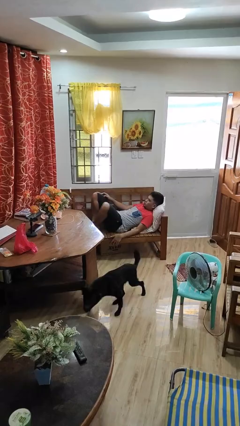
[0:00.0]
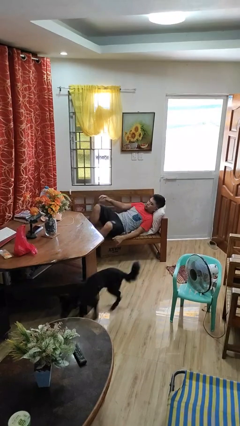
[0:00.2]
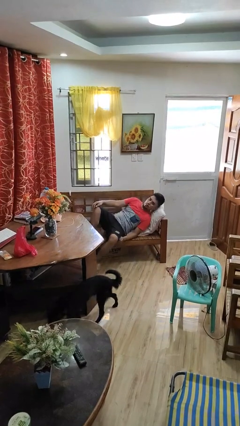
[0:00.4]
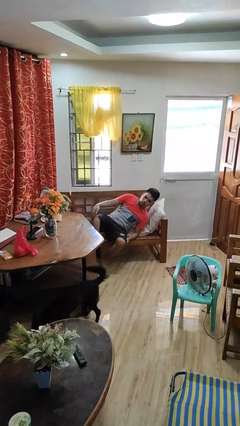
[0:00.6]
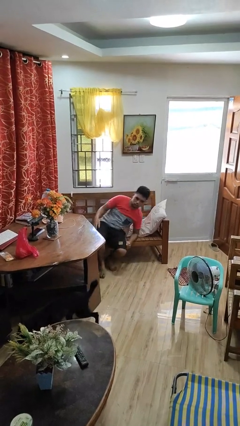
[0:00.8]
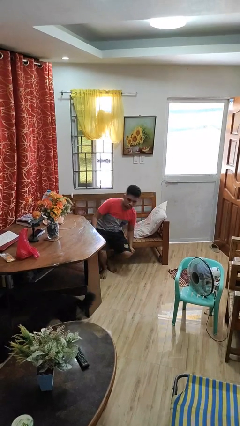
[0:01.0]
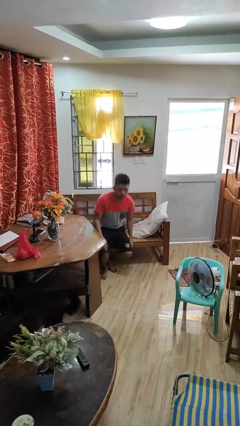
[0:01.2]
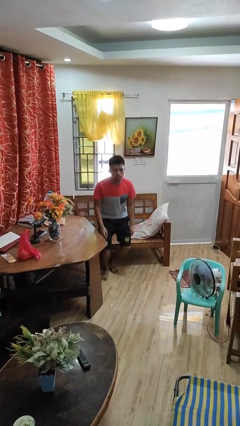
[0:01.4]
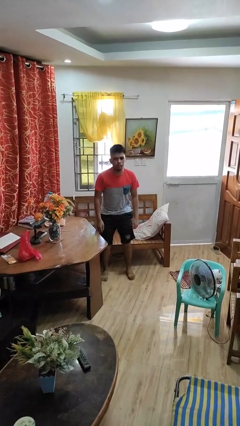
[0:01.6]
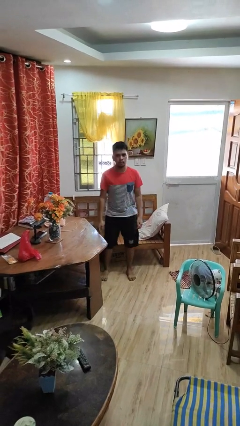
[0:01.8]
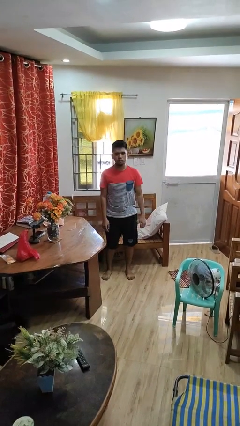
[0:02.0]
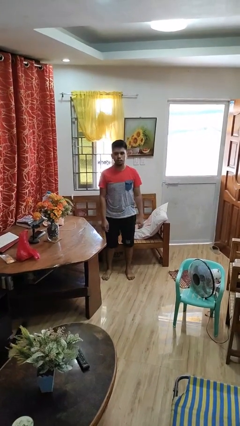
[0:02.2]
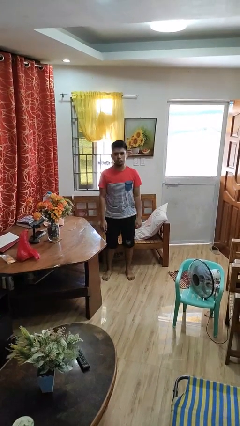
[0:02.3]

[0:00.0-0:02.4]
person stands up

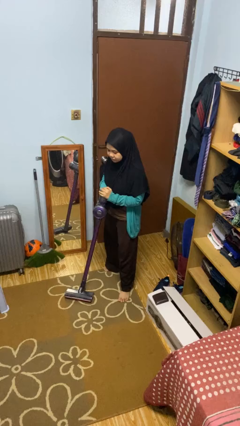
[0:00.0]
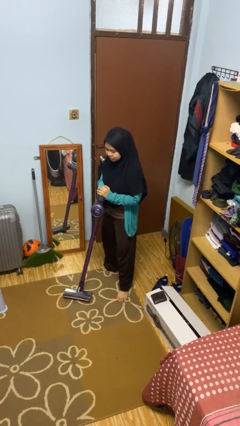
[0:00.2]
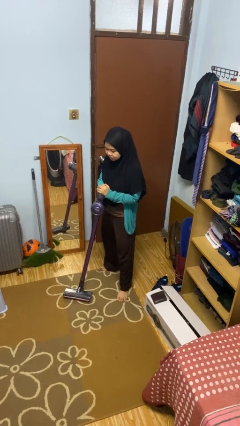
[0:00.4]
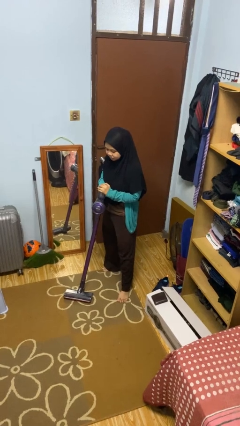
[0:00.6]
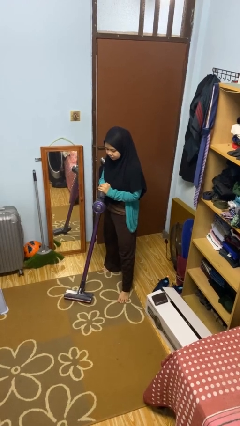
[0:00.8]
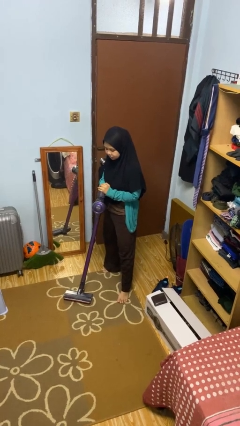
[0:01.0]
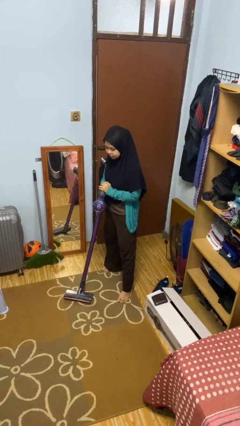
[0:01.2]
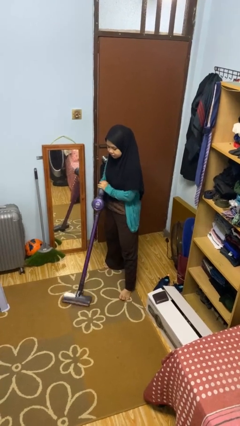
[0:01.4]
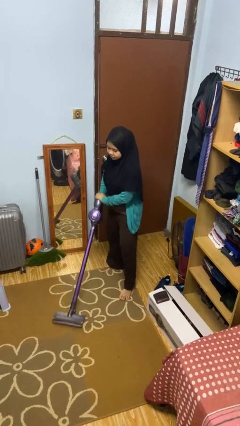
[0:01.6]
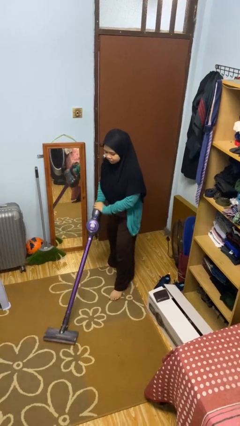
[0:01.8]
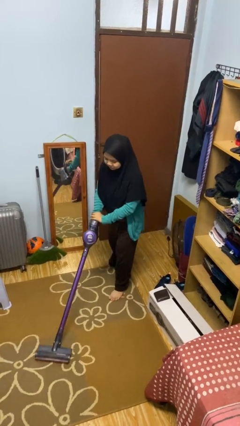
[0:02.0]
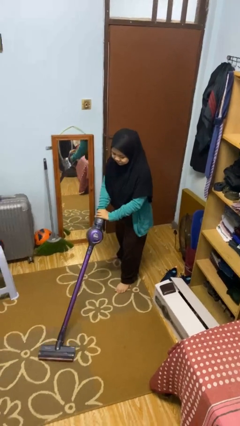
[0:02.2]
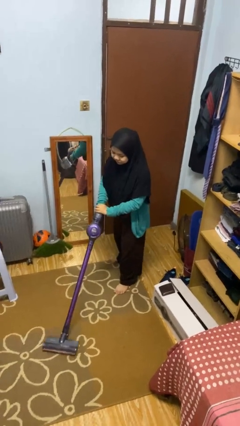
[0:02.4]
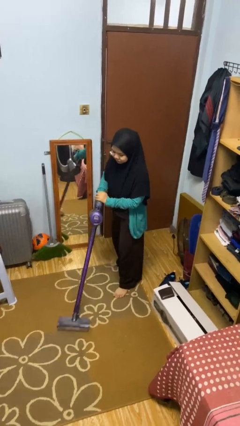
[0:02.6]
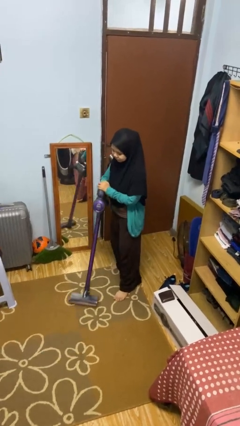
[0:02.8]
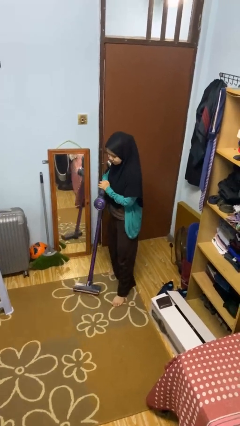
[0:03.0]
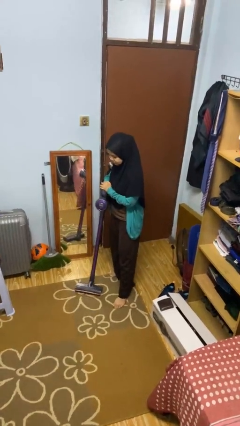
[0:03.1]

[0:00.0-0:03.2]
person vacuums carpet

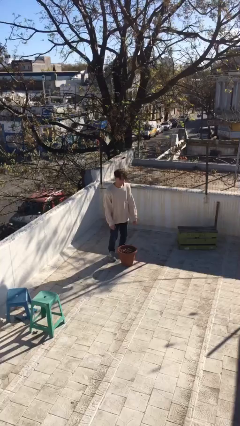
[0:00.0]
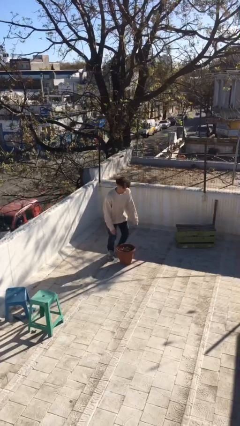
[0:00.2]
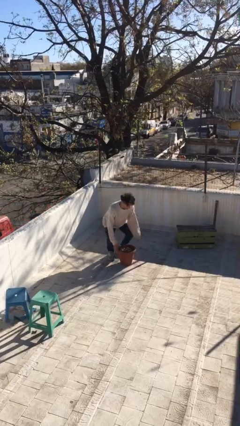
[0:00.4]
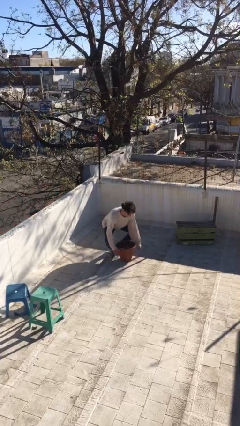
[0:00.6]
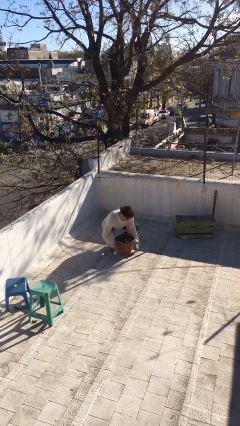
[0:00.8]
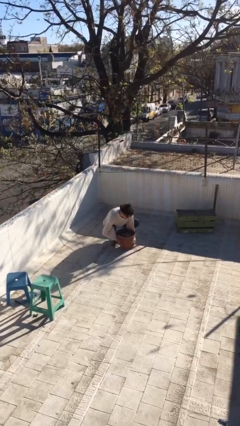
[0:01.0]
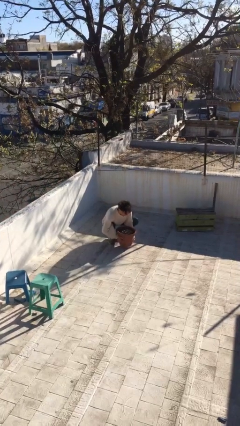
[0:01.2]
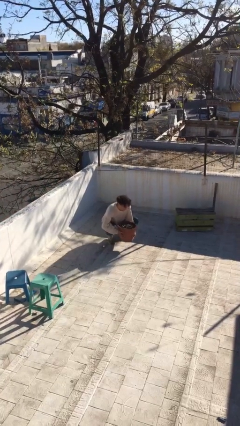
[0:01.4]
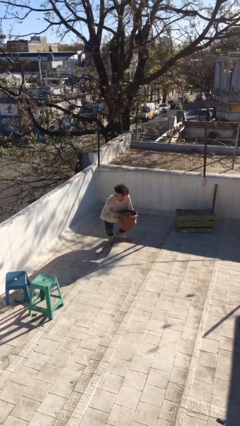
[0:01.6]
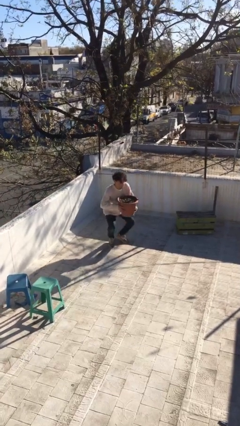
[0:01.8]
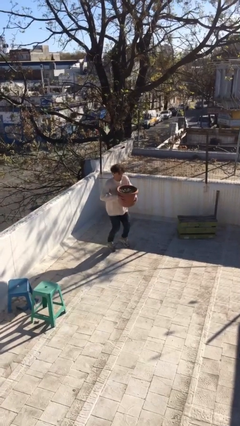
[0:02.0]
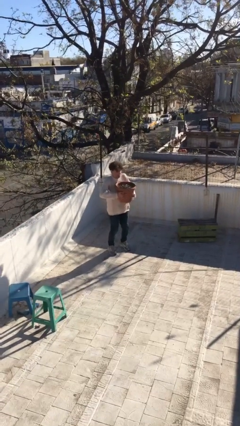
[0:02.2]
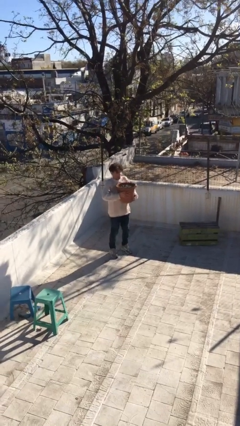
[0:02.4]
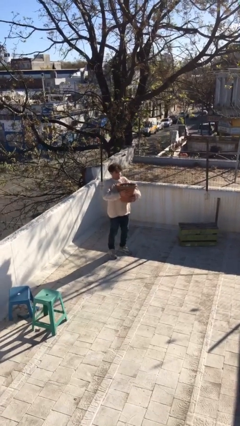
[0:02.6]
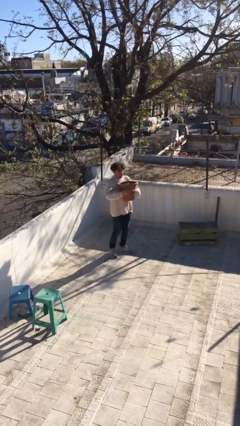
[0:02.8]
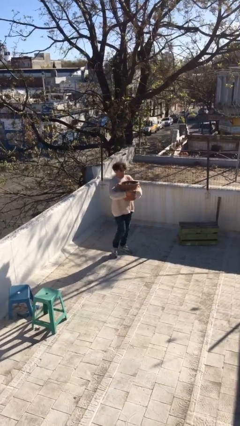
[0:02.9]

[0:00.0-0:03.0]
person picks up object from floor

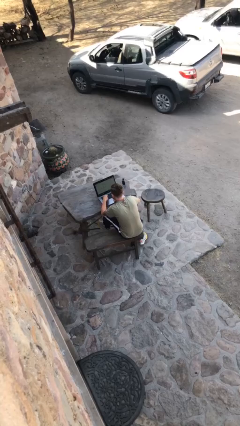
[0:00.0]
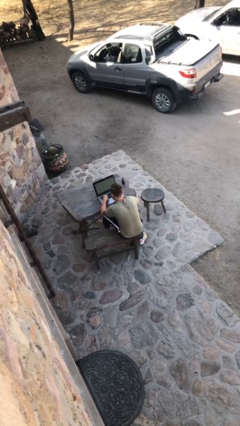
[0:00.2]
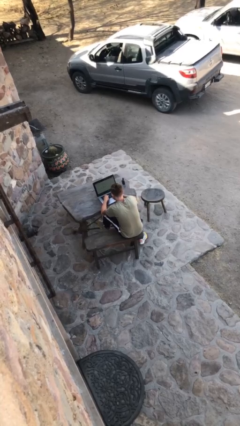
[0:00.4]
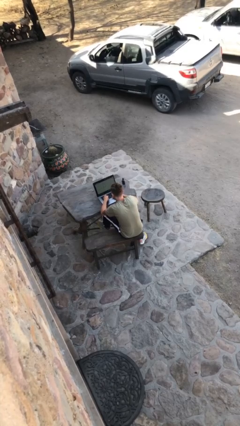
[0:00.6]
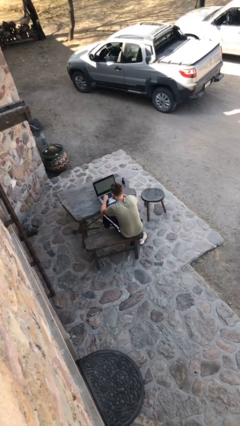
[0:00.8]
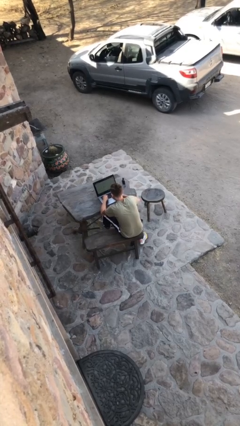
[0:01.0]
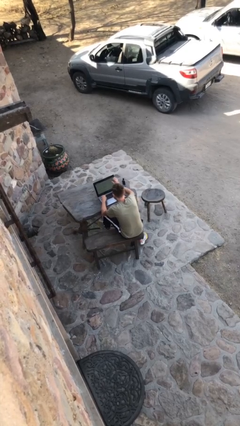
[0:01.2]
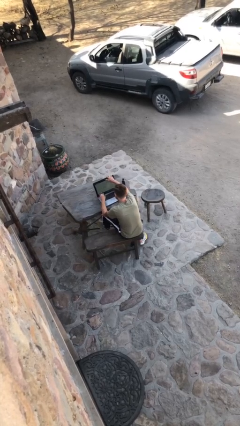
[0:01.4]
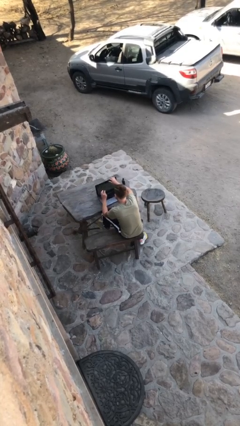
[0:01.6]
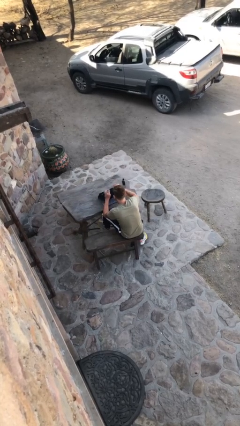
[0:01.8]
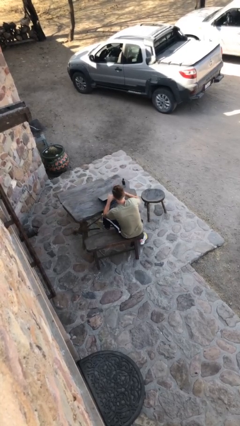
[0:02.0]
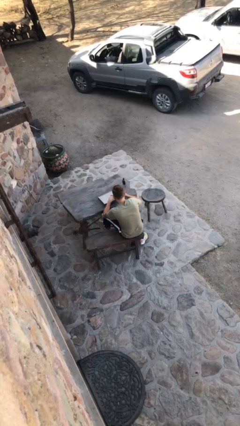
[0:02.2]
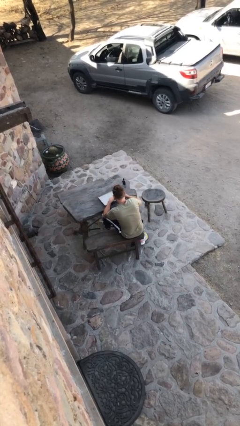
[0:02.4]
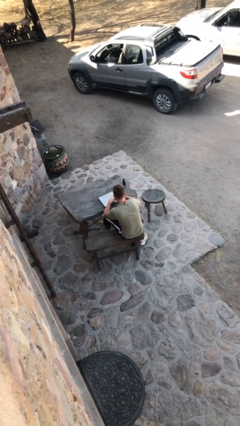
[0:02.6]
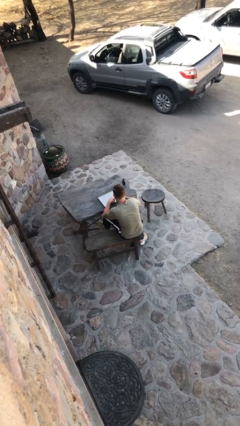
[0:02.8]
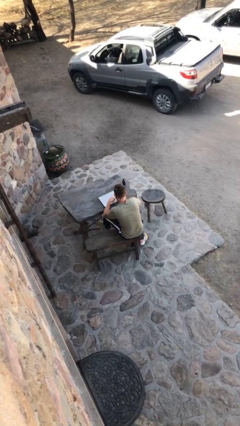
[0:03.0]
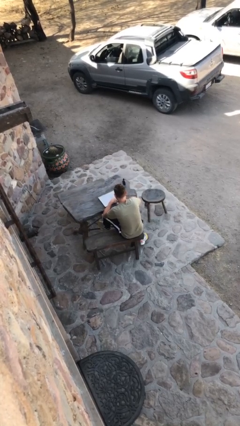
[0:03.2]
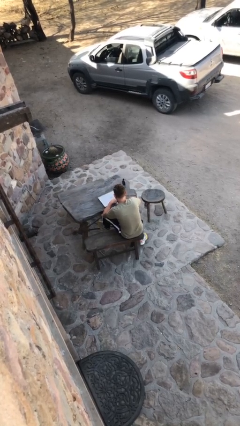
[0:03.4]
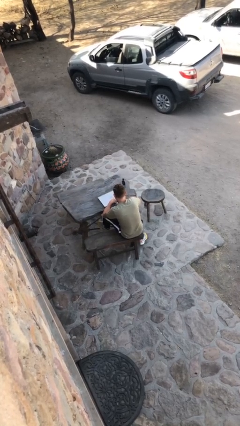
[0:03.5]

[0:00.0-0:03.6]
person interacts with laptop

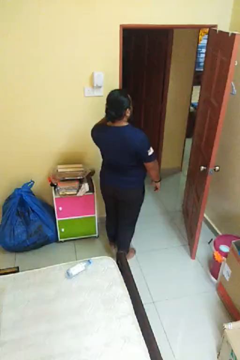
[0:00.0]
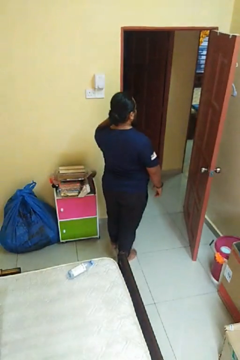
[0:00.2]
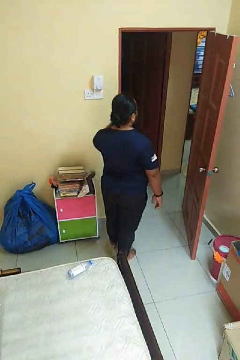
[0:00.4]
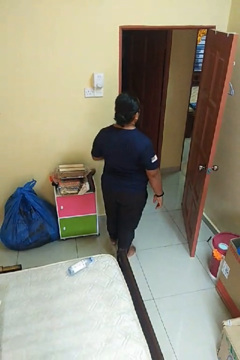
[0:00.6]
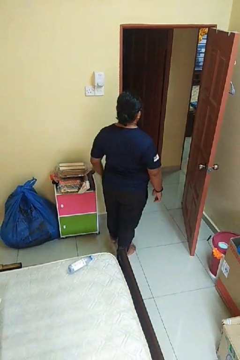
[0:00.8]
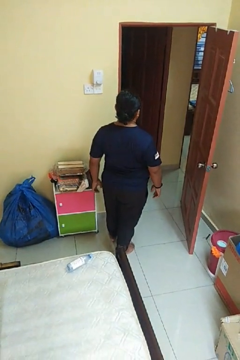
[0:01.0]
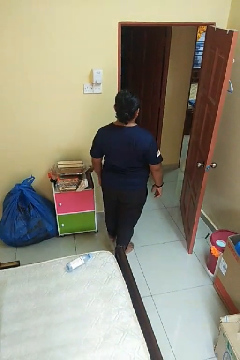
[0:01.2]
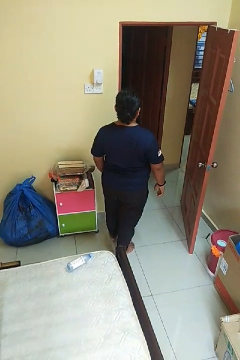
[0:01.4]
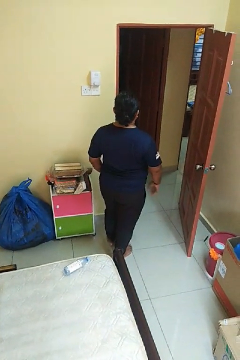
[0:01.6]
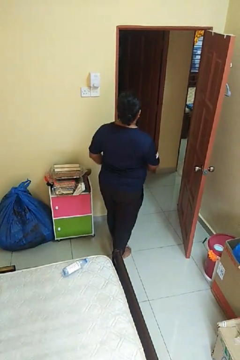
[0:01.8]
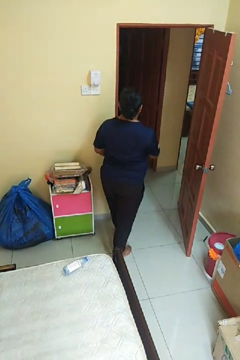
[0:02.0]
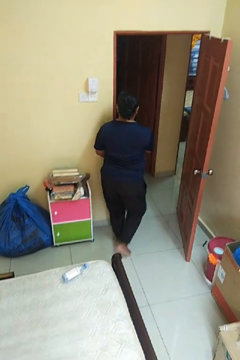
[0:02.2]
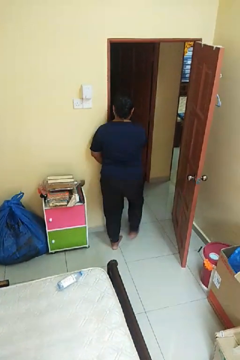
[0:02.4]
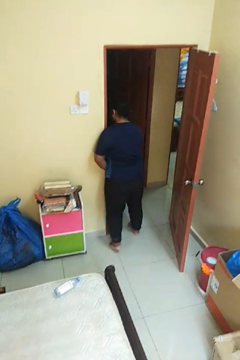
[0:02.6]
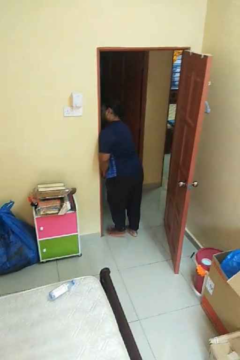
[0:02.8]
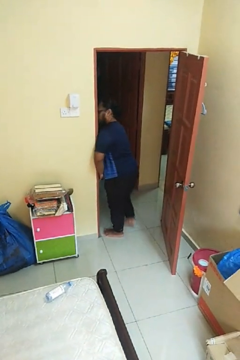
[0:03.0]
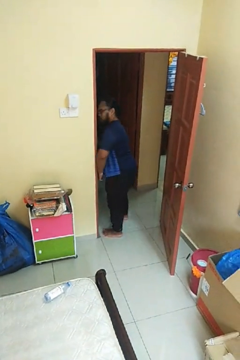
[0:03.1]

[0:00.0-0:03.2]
person bumps into wall

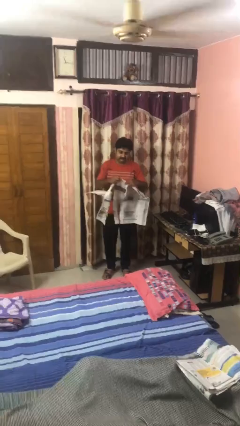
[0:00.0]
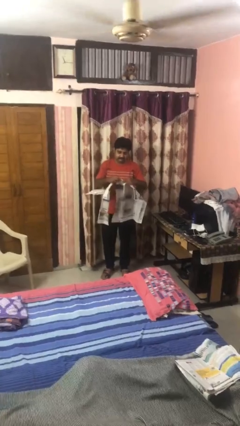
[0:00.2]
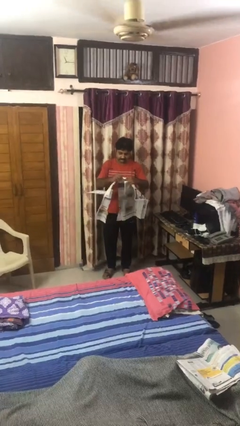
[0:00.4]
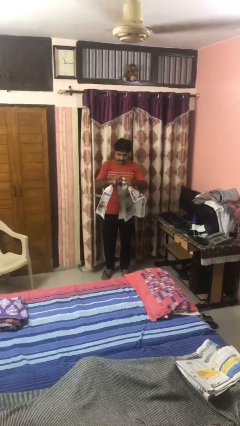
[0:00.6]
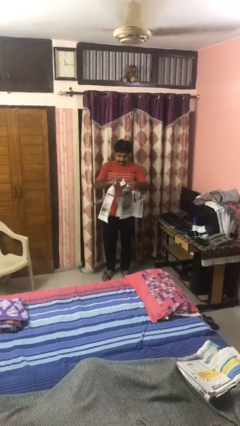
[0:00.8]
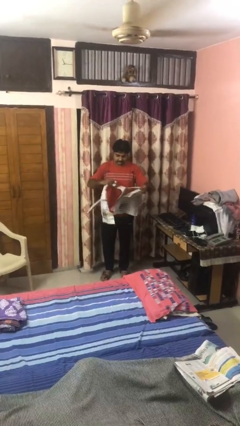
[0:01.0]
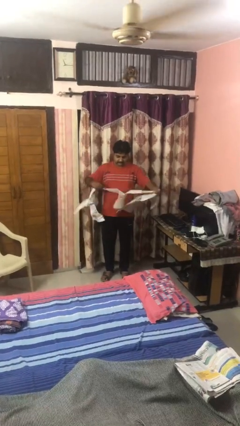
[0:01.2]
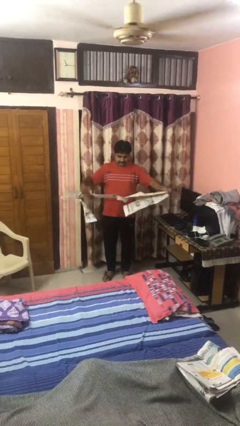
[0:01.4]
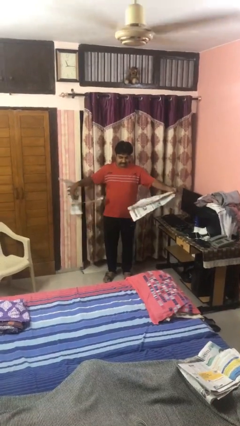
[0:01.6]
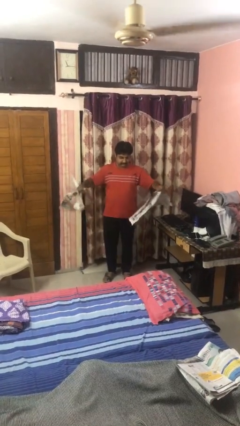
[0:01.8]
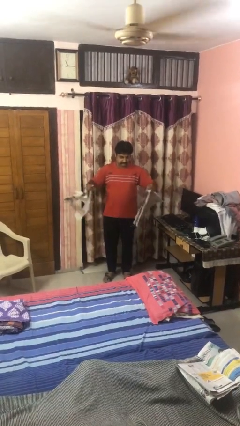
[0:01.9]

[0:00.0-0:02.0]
person tears paper

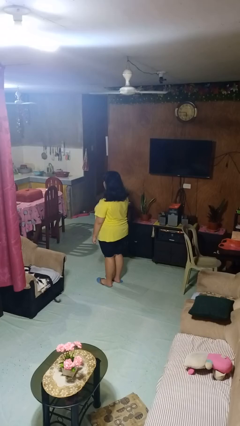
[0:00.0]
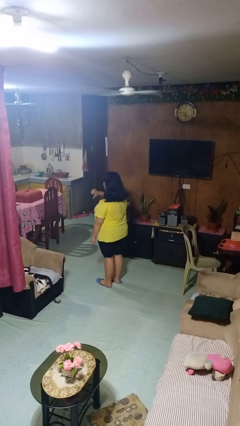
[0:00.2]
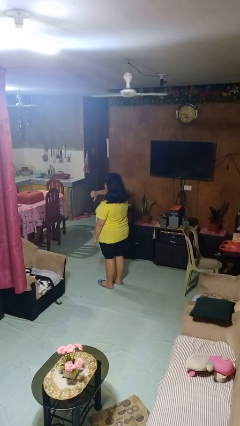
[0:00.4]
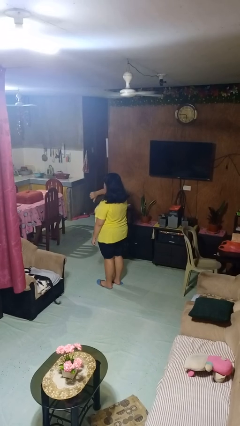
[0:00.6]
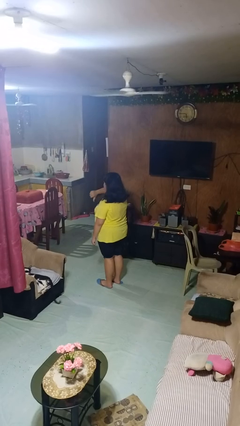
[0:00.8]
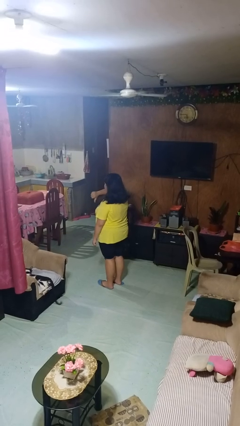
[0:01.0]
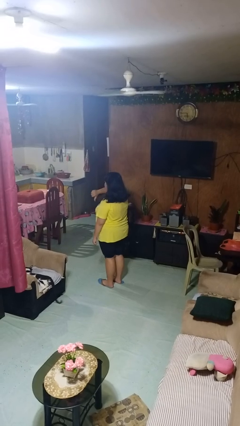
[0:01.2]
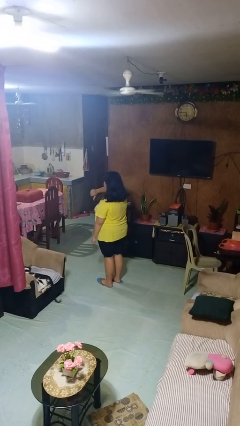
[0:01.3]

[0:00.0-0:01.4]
person gestures thumbs down
